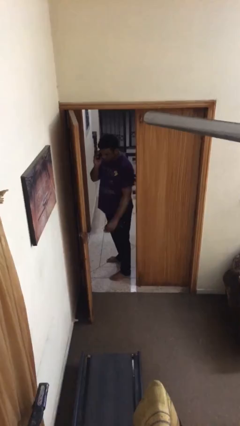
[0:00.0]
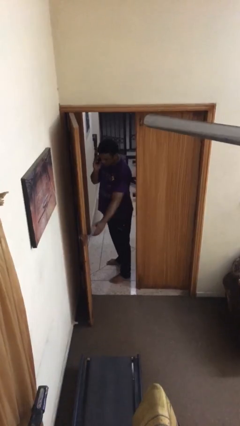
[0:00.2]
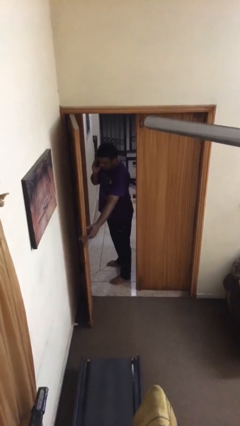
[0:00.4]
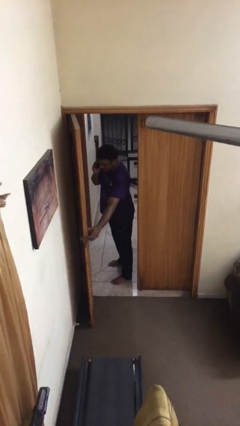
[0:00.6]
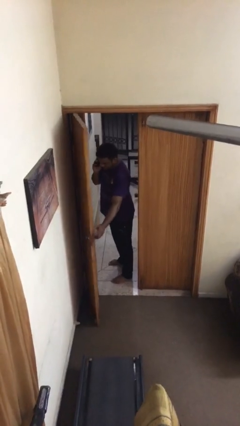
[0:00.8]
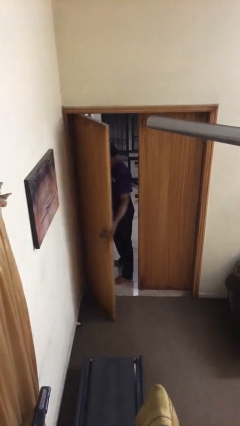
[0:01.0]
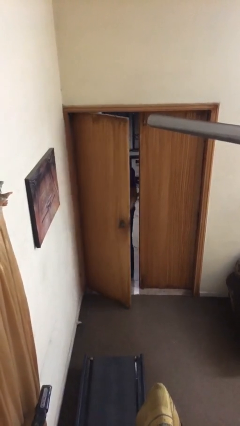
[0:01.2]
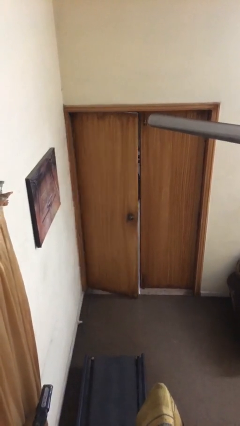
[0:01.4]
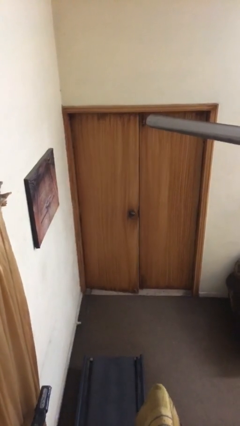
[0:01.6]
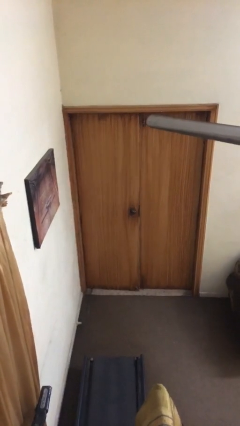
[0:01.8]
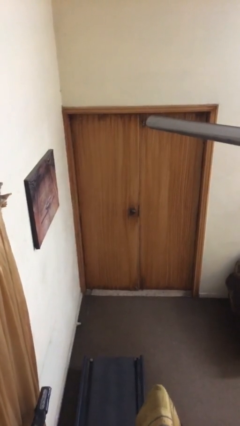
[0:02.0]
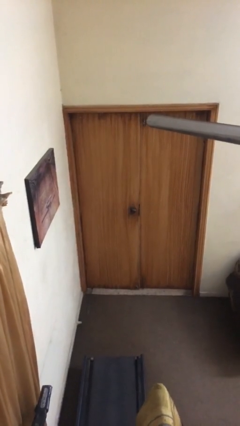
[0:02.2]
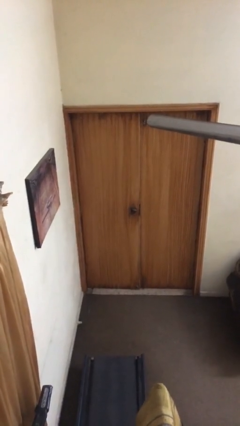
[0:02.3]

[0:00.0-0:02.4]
person closes facility door

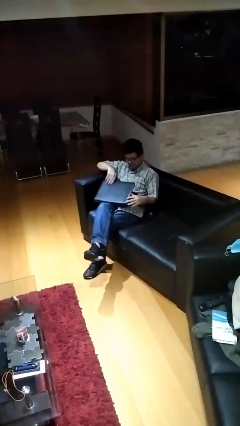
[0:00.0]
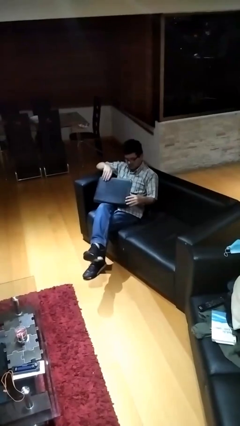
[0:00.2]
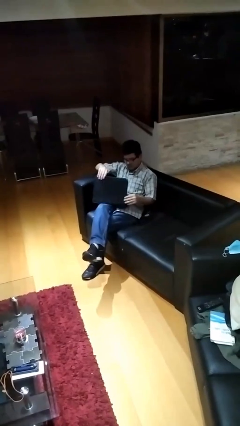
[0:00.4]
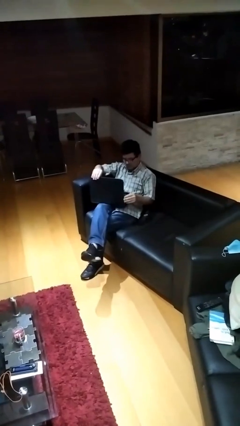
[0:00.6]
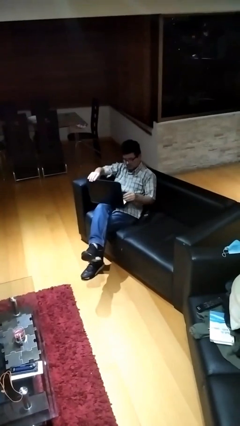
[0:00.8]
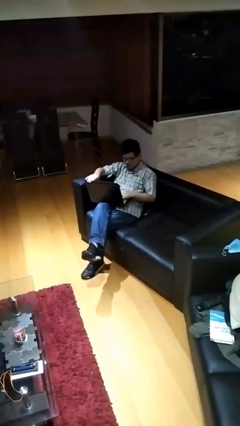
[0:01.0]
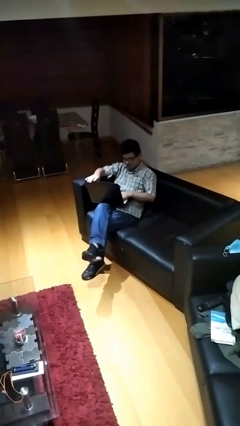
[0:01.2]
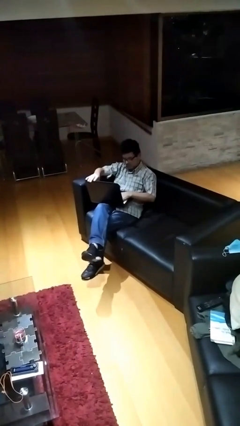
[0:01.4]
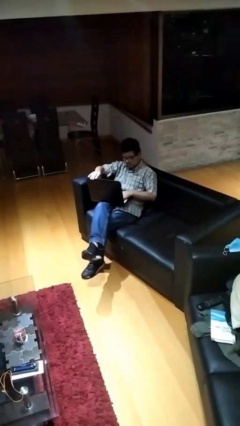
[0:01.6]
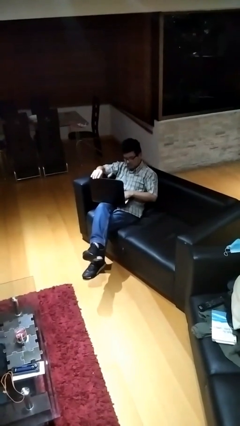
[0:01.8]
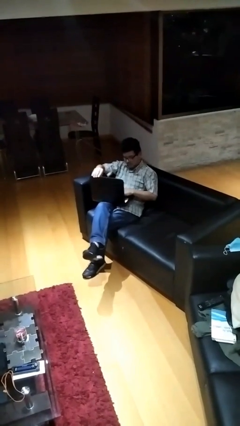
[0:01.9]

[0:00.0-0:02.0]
person interacts with laptop

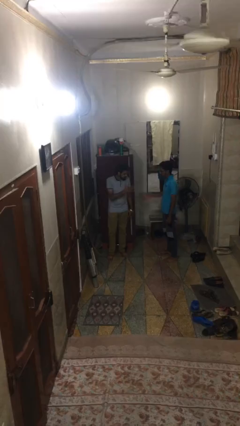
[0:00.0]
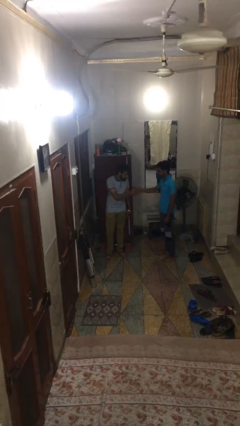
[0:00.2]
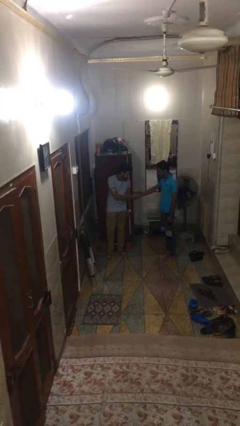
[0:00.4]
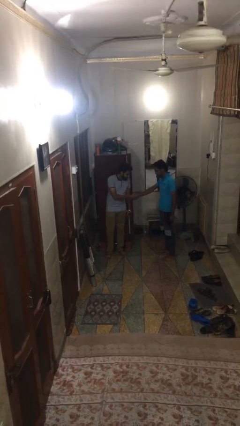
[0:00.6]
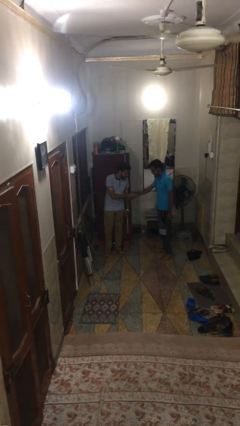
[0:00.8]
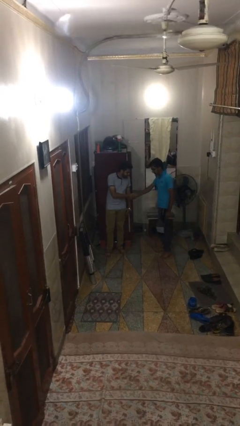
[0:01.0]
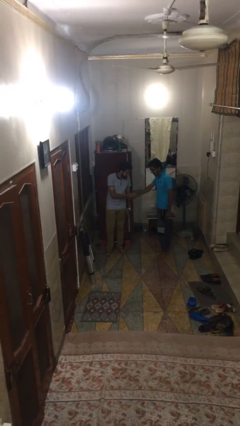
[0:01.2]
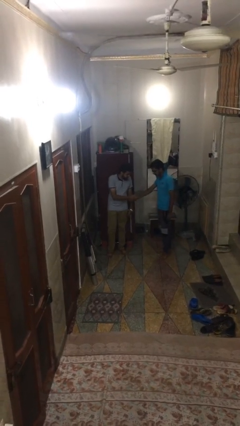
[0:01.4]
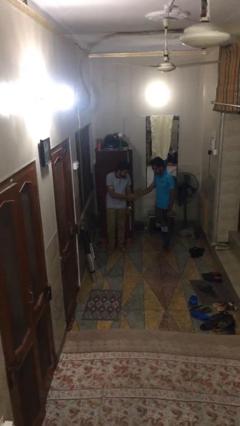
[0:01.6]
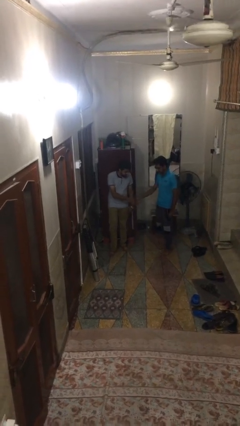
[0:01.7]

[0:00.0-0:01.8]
person shakes hand

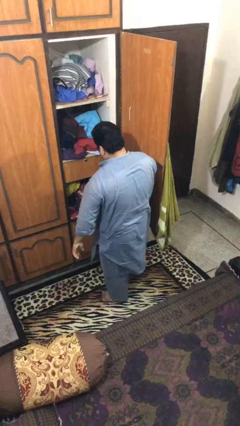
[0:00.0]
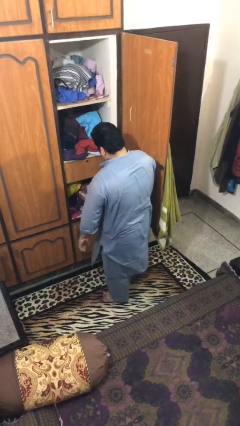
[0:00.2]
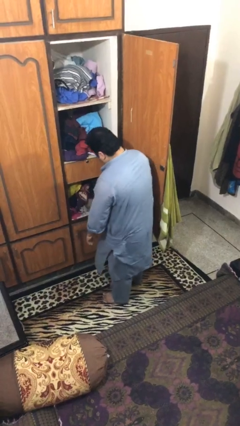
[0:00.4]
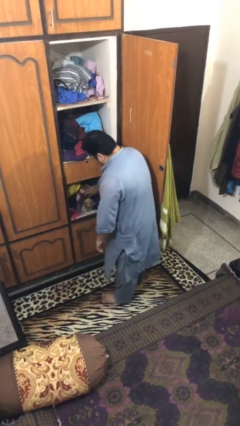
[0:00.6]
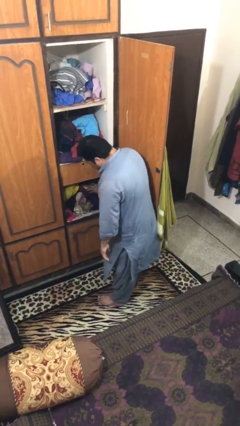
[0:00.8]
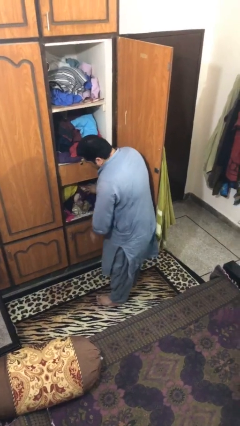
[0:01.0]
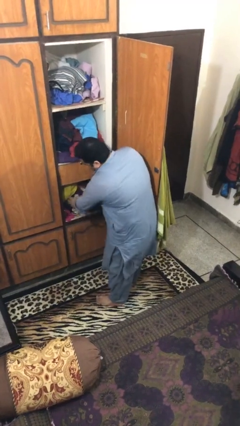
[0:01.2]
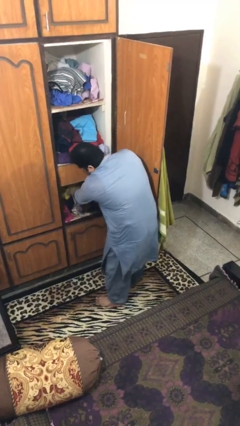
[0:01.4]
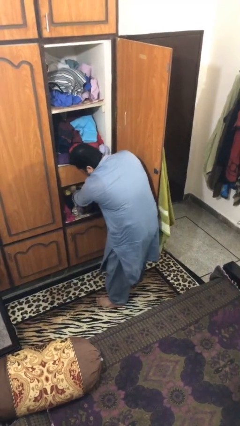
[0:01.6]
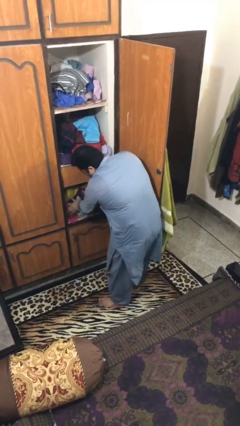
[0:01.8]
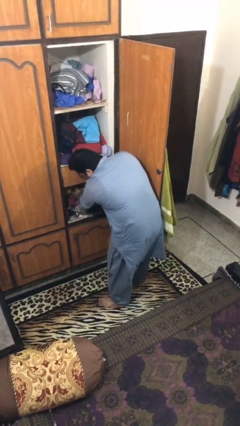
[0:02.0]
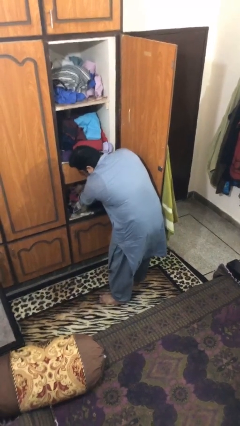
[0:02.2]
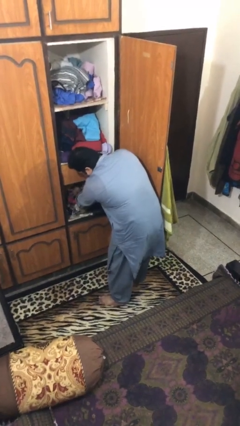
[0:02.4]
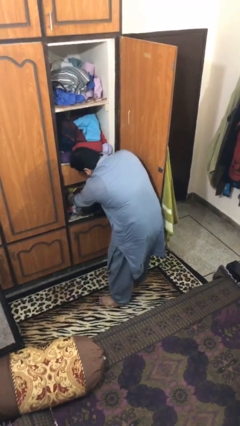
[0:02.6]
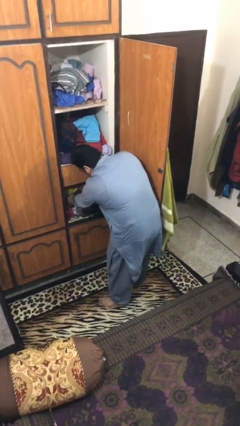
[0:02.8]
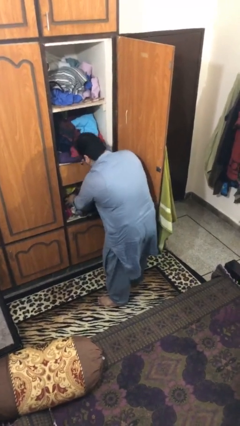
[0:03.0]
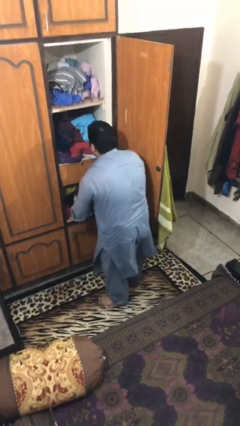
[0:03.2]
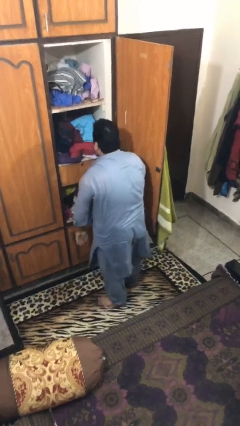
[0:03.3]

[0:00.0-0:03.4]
person searches in cabinet

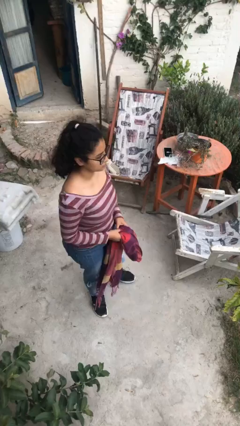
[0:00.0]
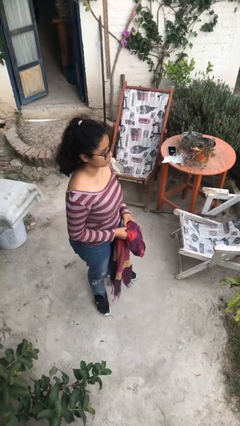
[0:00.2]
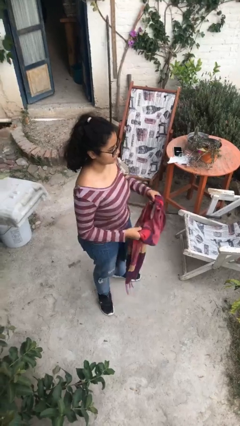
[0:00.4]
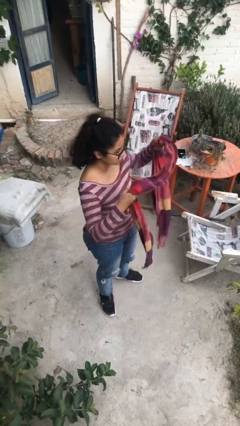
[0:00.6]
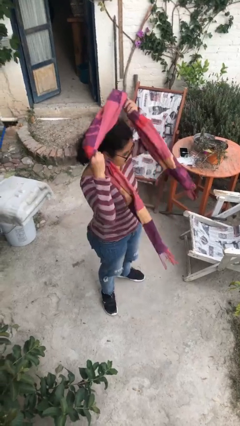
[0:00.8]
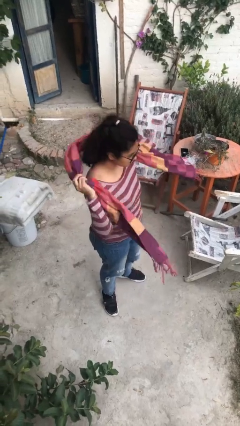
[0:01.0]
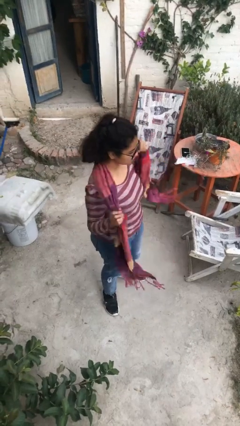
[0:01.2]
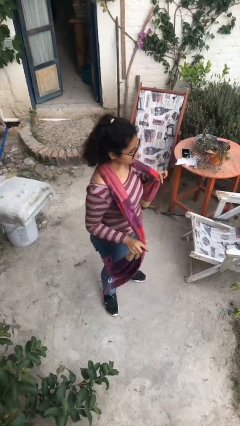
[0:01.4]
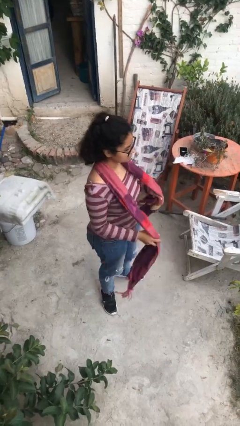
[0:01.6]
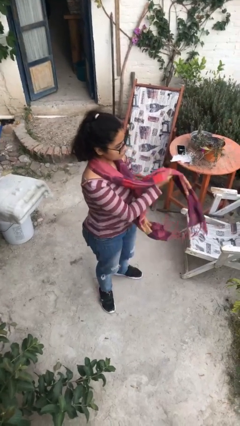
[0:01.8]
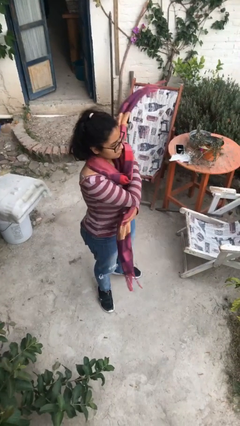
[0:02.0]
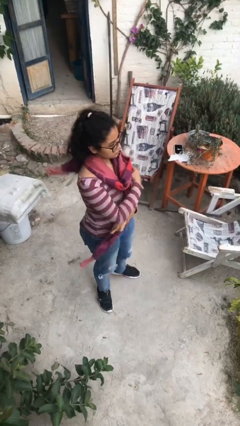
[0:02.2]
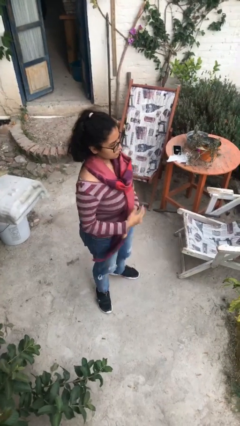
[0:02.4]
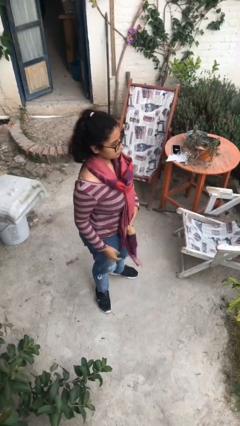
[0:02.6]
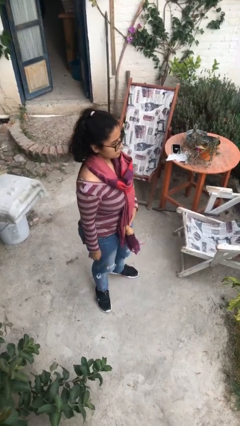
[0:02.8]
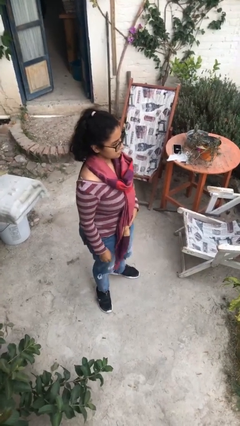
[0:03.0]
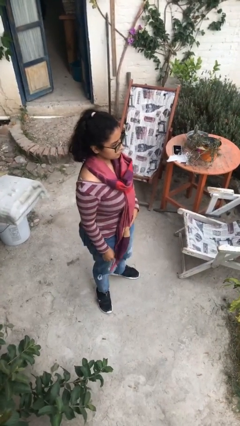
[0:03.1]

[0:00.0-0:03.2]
person puts on scarf

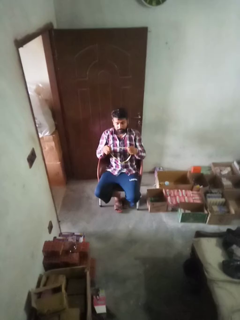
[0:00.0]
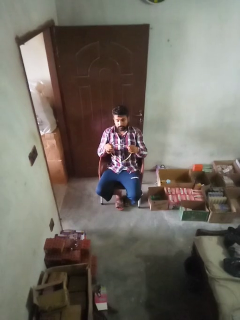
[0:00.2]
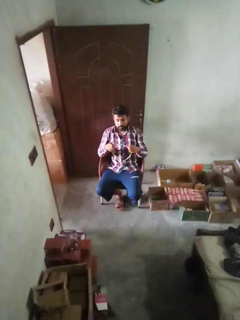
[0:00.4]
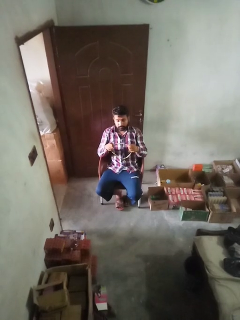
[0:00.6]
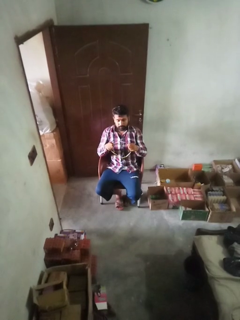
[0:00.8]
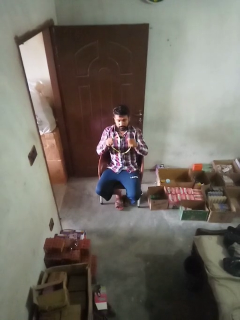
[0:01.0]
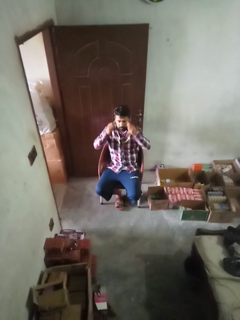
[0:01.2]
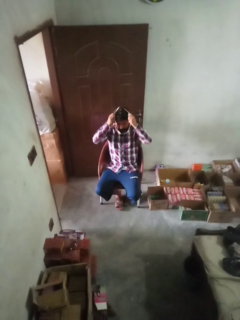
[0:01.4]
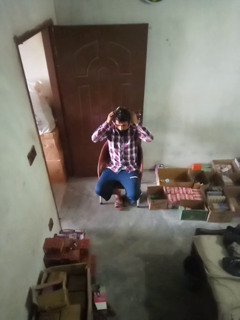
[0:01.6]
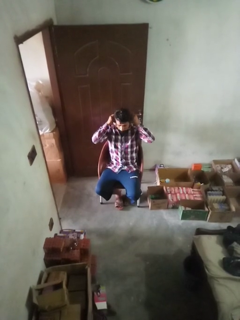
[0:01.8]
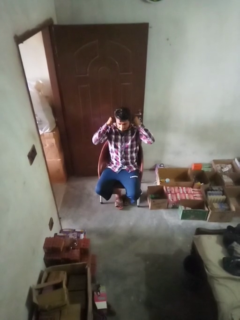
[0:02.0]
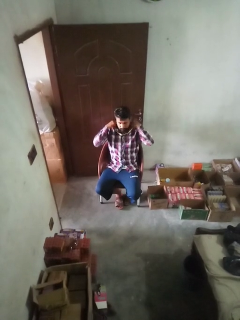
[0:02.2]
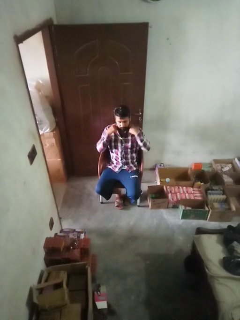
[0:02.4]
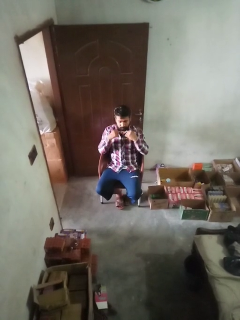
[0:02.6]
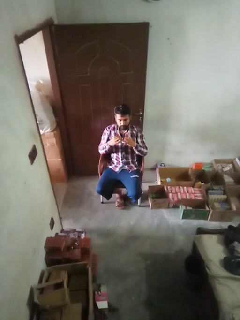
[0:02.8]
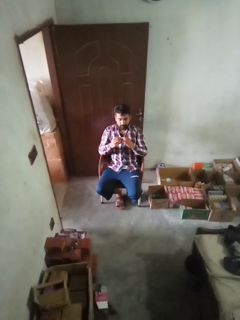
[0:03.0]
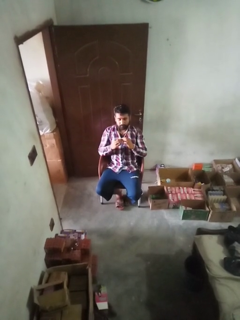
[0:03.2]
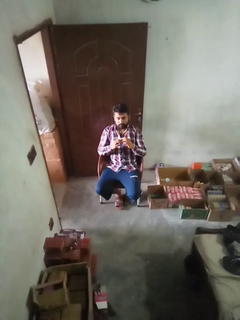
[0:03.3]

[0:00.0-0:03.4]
person puts on necklace

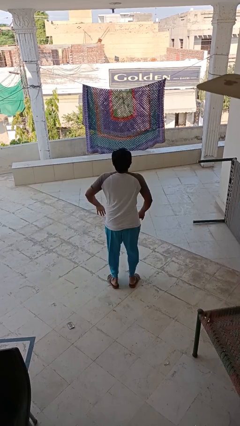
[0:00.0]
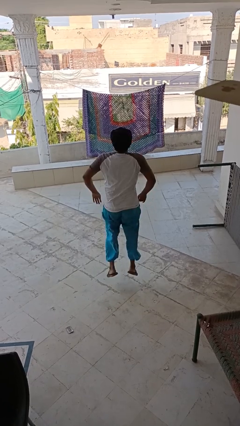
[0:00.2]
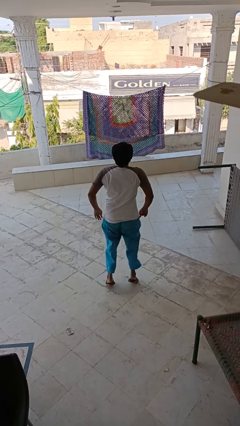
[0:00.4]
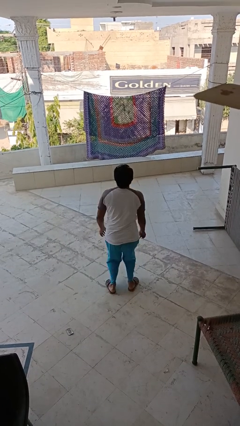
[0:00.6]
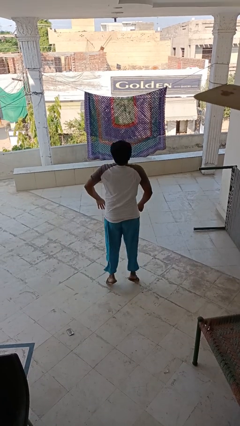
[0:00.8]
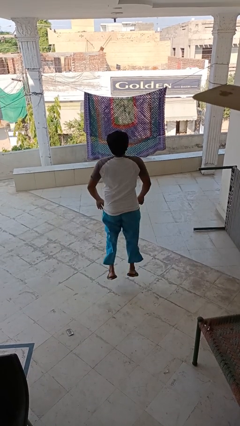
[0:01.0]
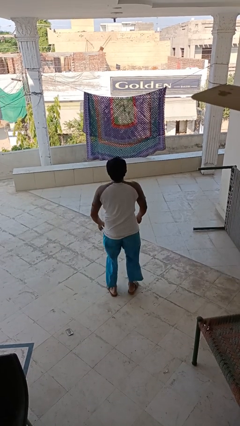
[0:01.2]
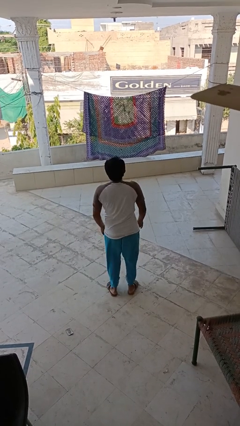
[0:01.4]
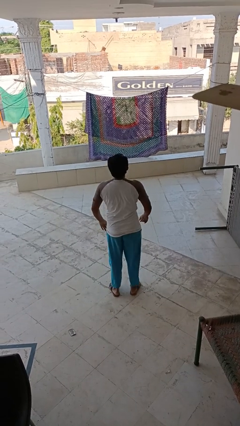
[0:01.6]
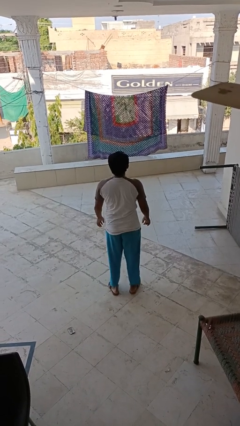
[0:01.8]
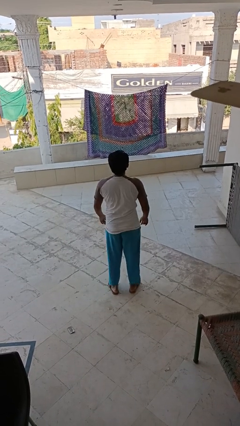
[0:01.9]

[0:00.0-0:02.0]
person jumps
